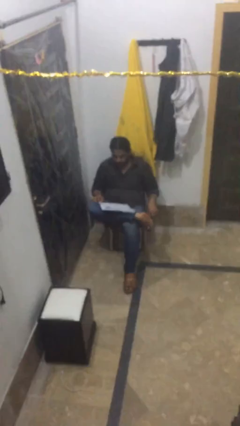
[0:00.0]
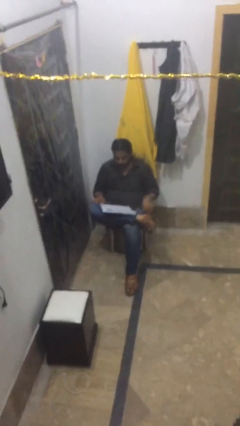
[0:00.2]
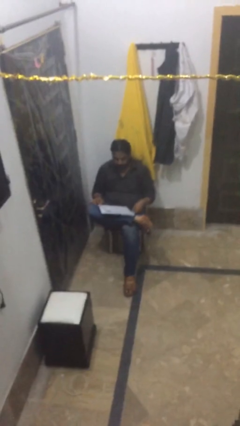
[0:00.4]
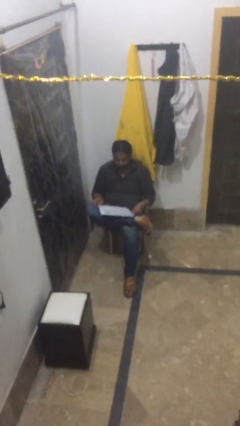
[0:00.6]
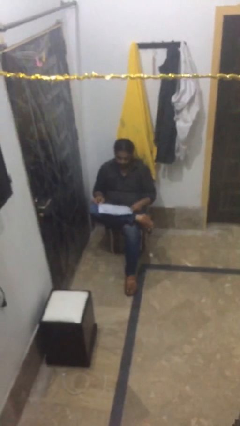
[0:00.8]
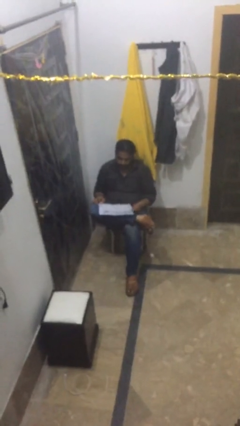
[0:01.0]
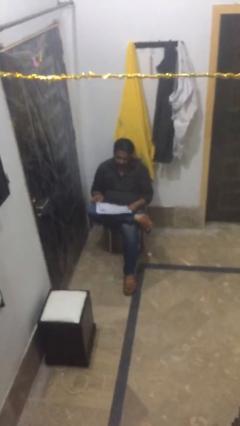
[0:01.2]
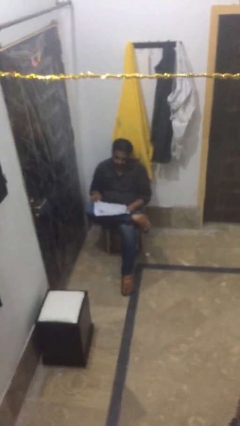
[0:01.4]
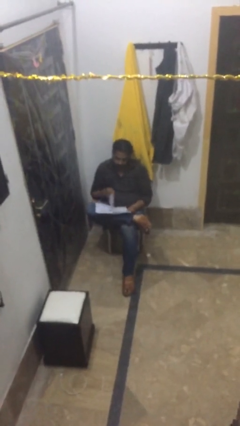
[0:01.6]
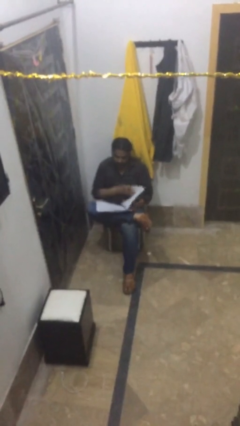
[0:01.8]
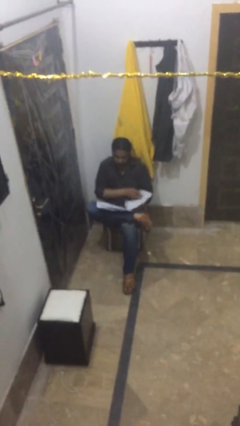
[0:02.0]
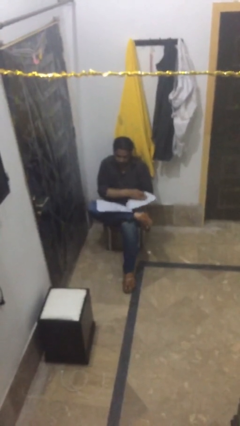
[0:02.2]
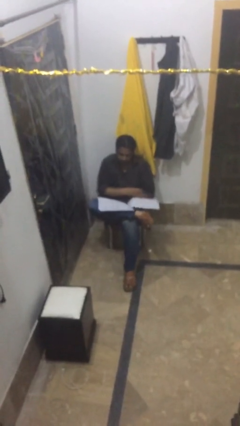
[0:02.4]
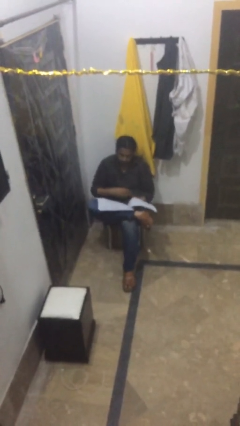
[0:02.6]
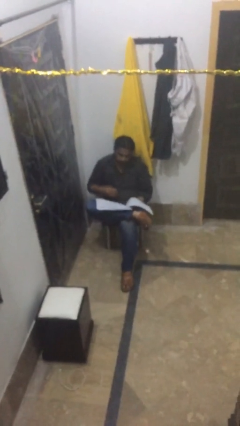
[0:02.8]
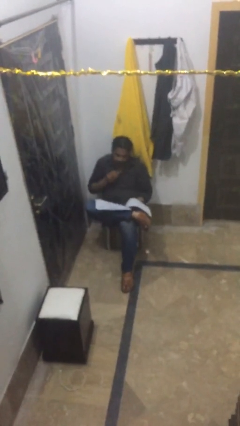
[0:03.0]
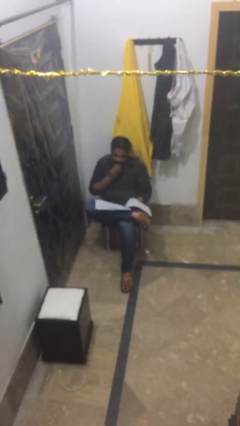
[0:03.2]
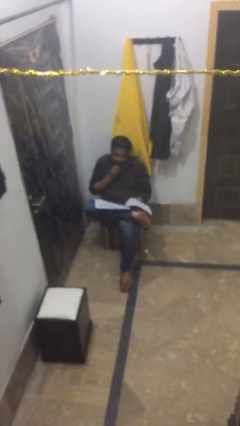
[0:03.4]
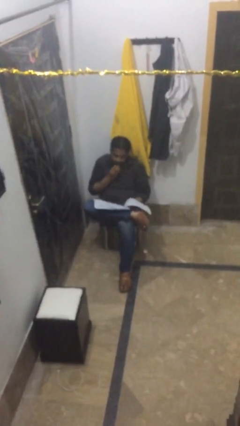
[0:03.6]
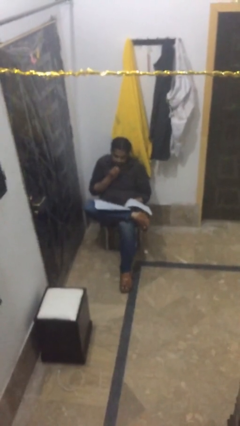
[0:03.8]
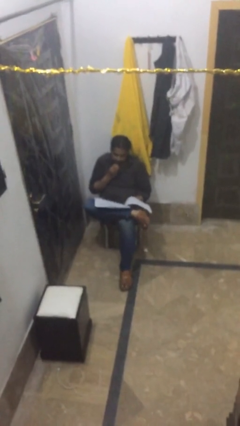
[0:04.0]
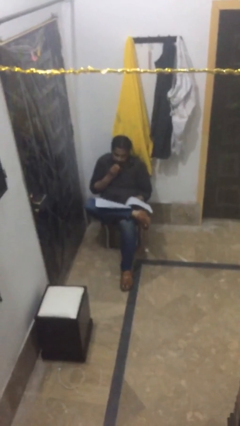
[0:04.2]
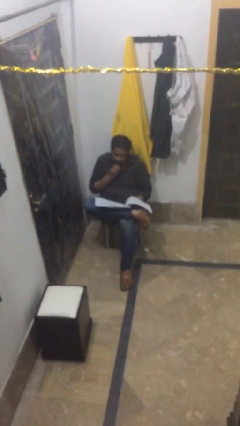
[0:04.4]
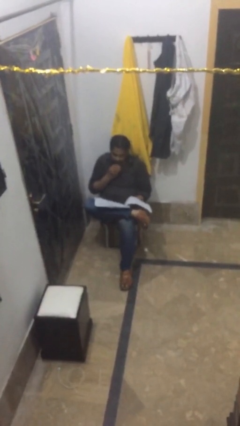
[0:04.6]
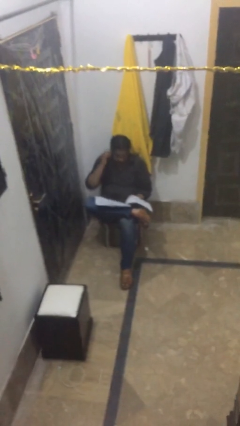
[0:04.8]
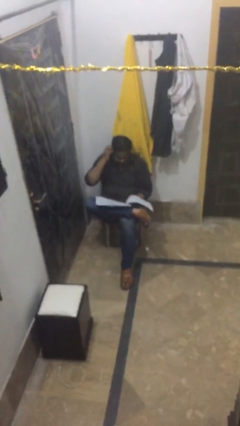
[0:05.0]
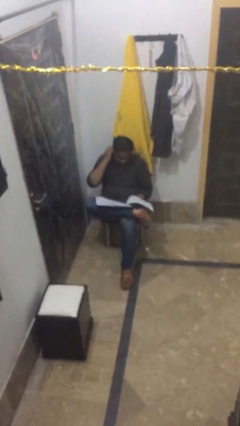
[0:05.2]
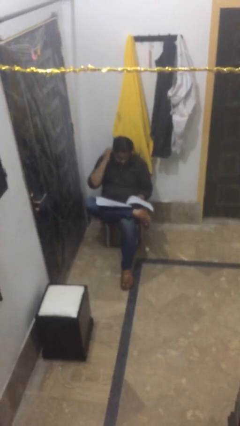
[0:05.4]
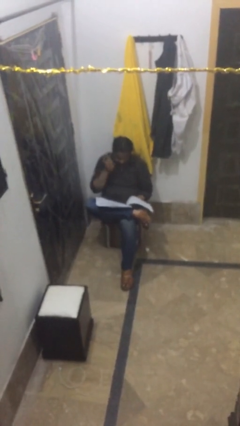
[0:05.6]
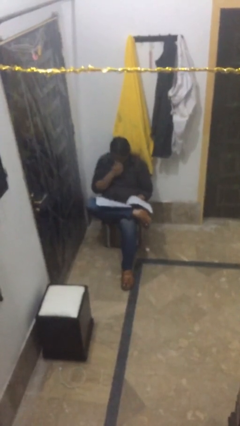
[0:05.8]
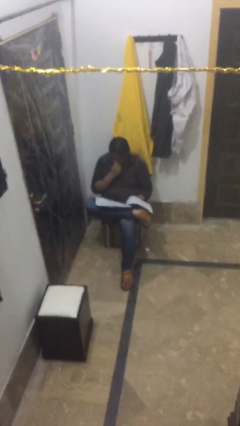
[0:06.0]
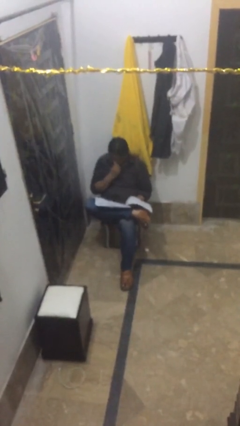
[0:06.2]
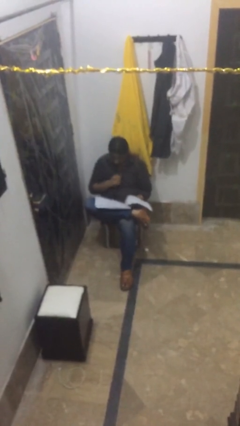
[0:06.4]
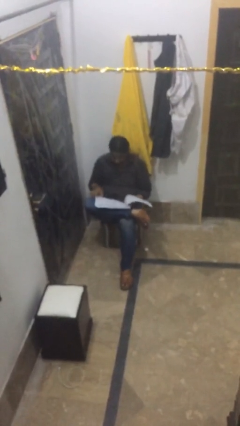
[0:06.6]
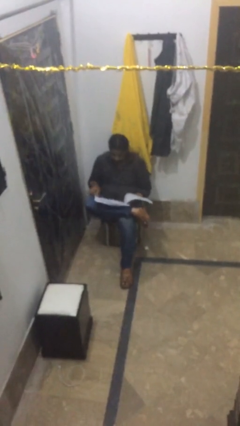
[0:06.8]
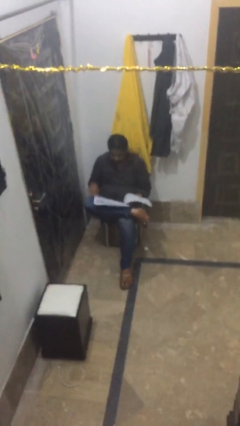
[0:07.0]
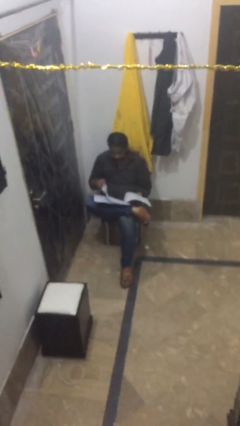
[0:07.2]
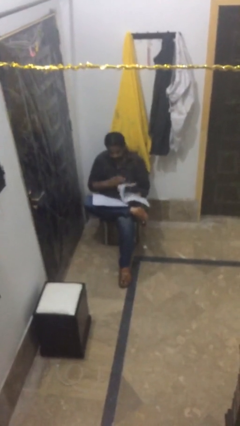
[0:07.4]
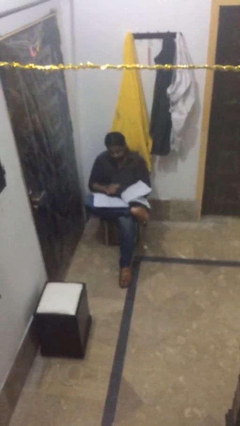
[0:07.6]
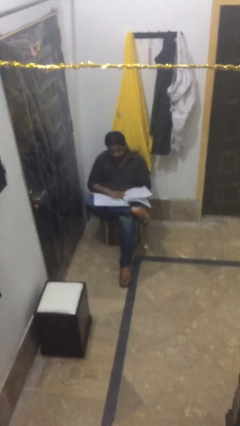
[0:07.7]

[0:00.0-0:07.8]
person reads document

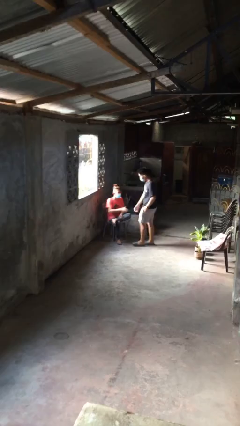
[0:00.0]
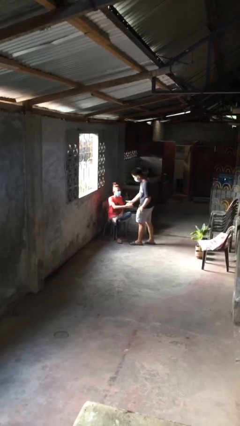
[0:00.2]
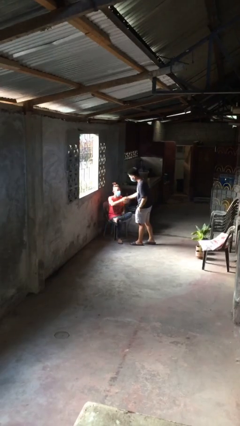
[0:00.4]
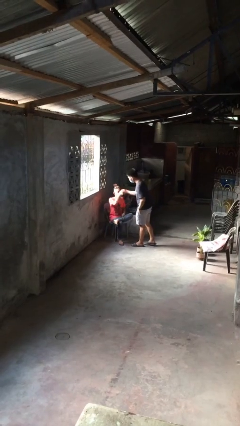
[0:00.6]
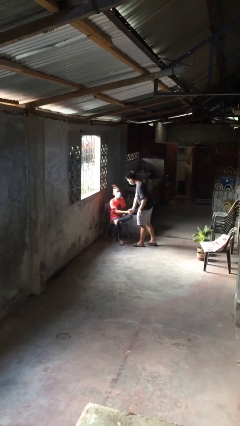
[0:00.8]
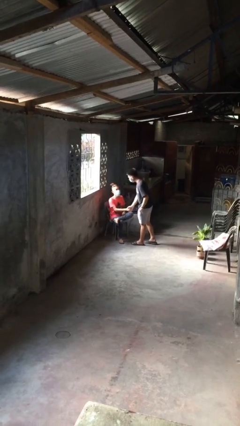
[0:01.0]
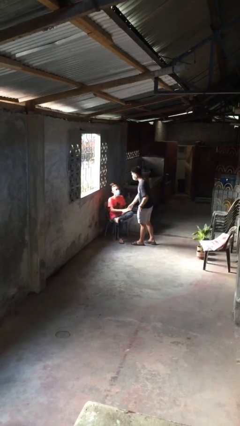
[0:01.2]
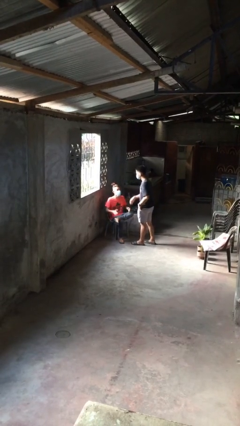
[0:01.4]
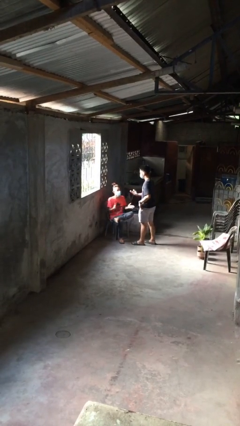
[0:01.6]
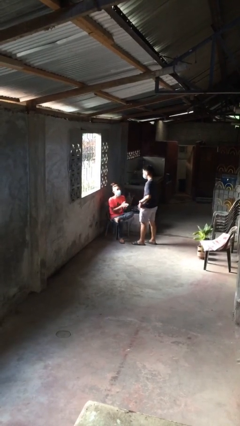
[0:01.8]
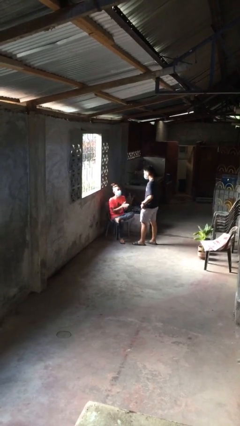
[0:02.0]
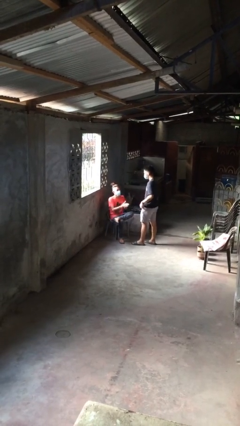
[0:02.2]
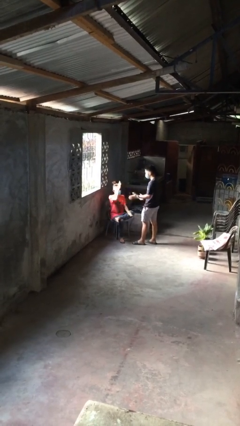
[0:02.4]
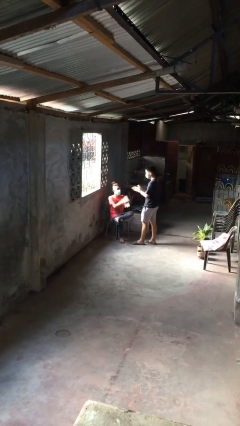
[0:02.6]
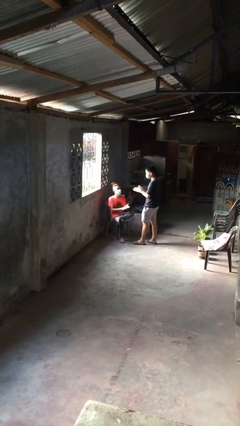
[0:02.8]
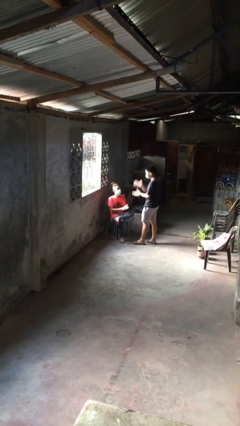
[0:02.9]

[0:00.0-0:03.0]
person shakes hand

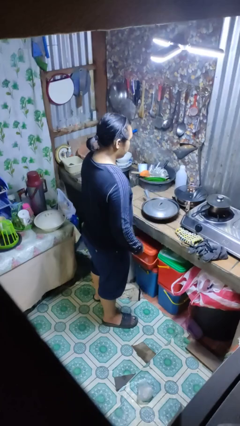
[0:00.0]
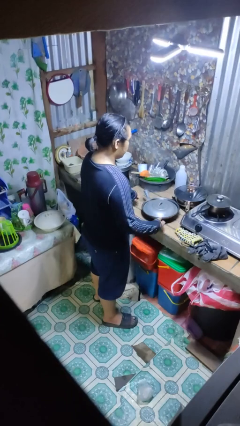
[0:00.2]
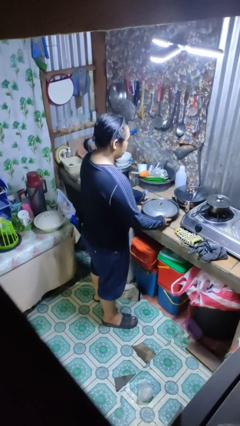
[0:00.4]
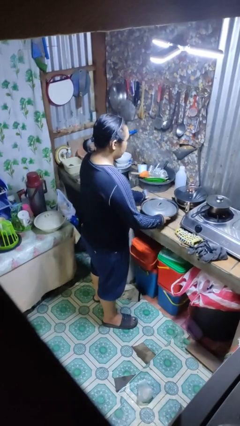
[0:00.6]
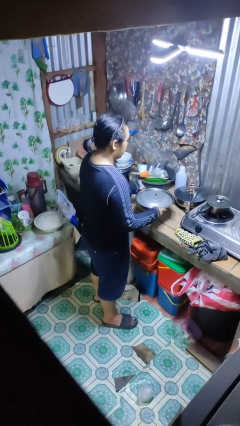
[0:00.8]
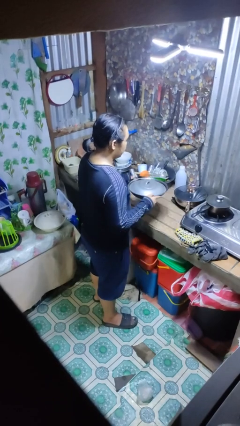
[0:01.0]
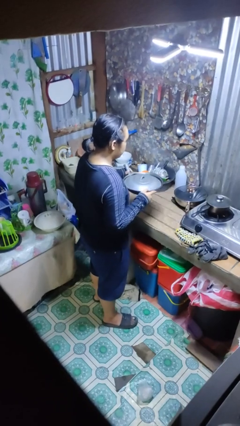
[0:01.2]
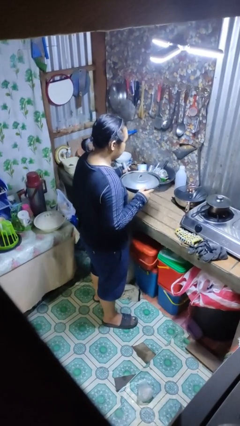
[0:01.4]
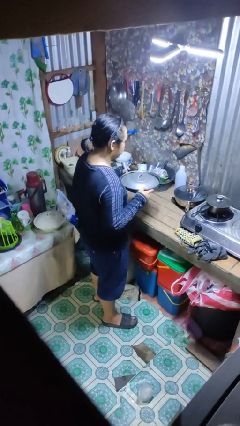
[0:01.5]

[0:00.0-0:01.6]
person picks up object from countertop

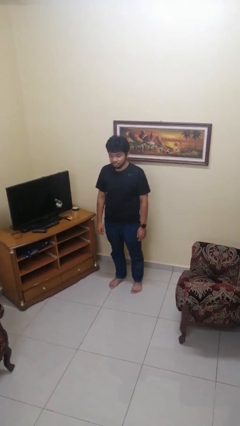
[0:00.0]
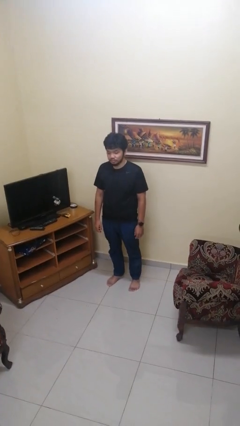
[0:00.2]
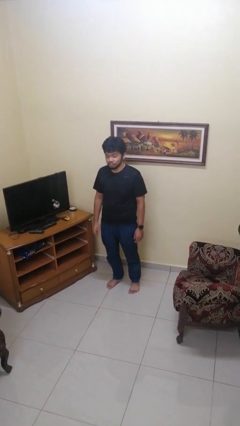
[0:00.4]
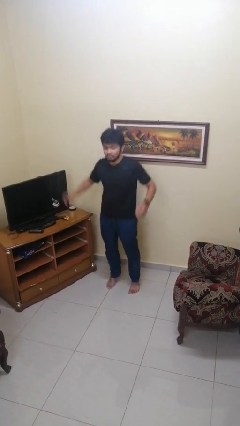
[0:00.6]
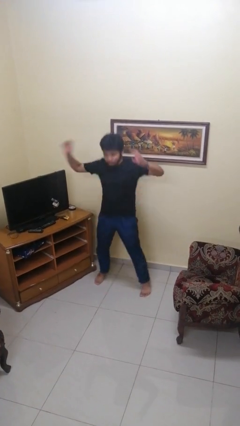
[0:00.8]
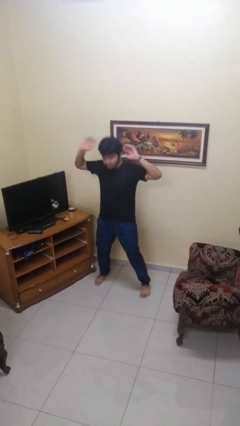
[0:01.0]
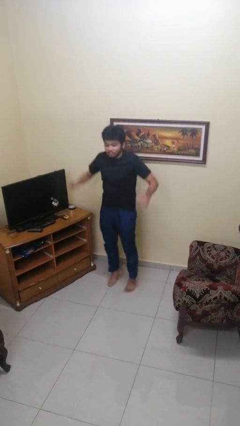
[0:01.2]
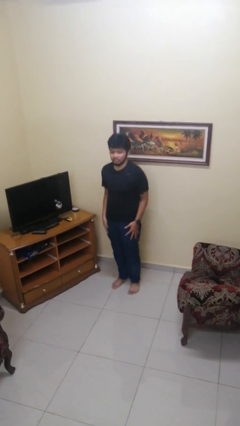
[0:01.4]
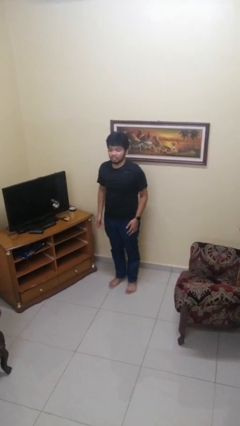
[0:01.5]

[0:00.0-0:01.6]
person exercises with jumping jacks

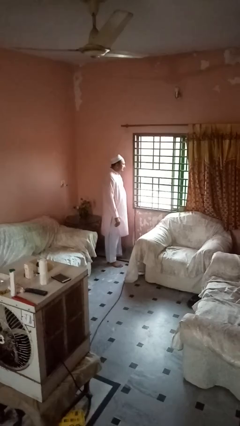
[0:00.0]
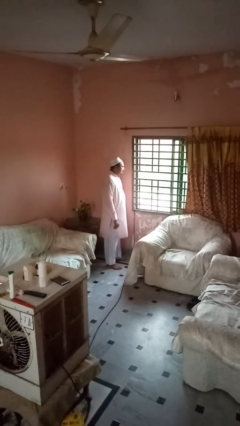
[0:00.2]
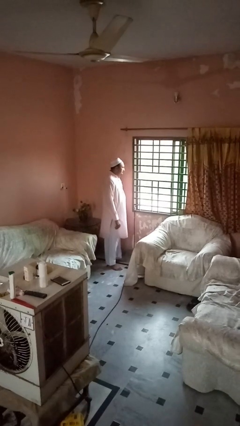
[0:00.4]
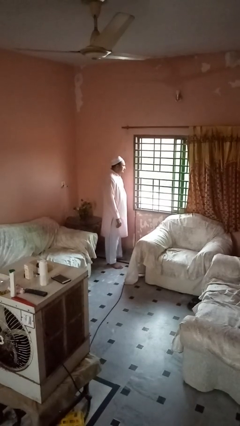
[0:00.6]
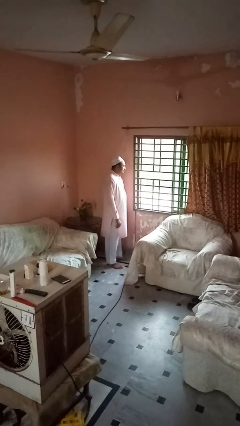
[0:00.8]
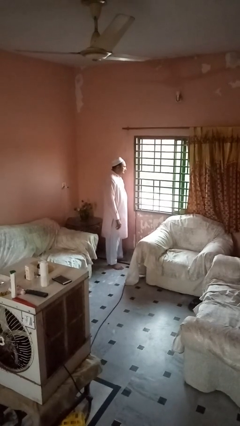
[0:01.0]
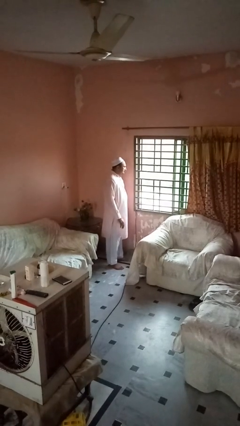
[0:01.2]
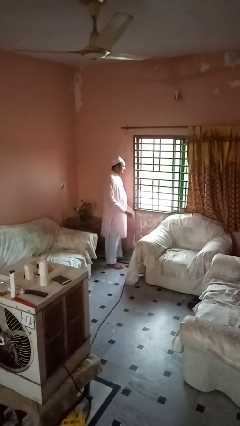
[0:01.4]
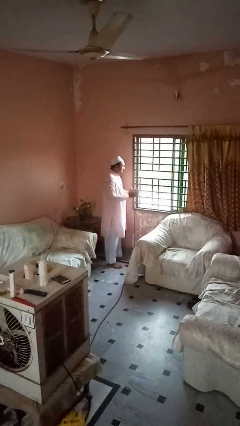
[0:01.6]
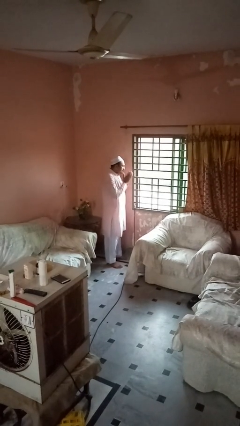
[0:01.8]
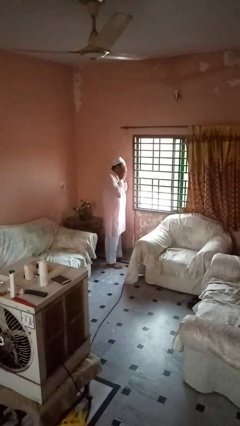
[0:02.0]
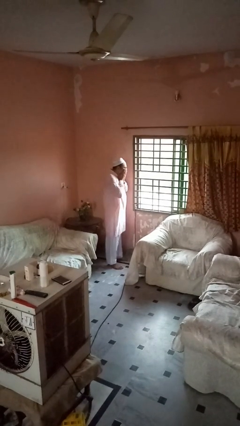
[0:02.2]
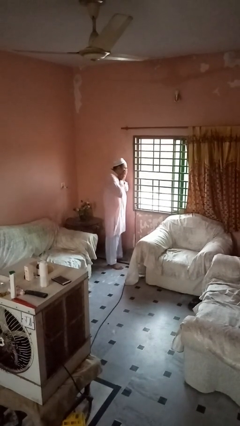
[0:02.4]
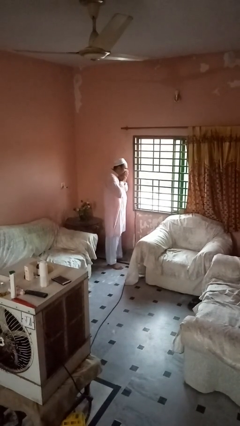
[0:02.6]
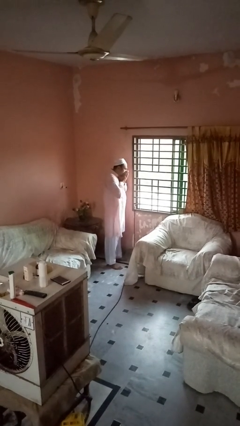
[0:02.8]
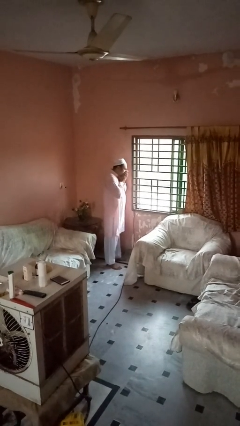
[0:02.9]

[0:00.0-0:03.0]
person covers face with hands

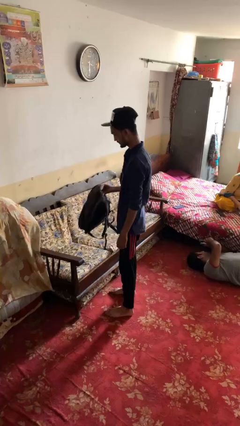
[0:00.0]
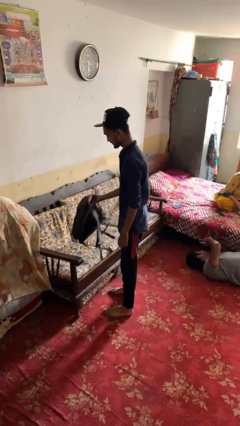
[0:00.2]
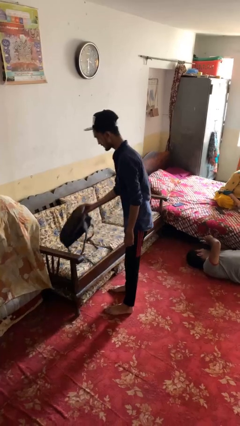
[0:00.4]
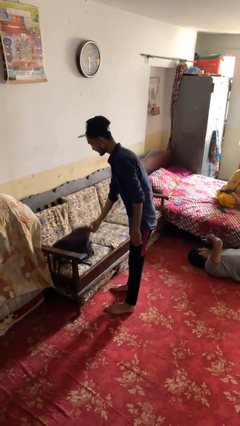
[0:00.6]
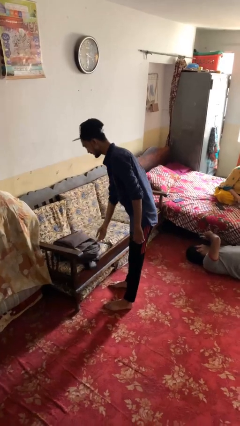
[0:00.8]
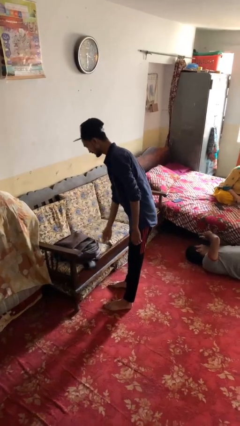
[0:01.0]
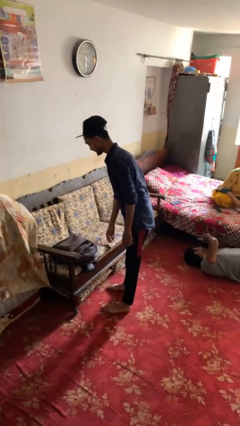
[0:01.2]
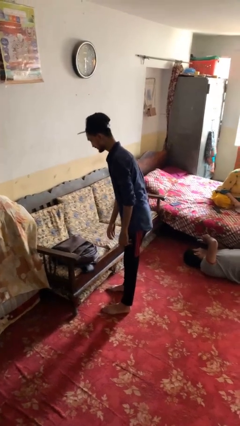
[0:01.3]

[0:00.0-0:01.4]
person puts down object on couch
